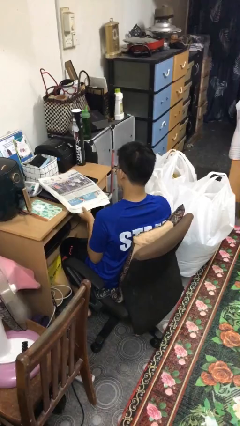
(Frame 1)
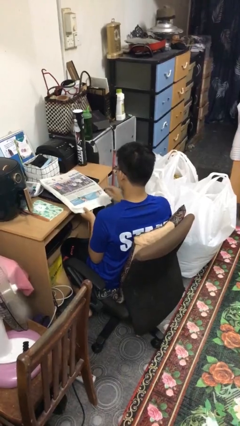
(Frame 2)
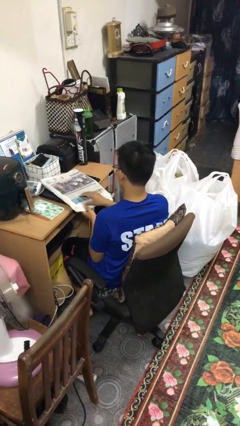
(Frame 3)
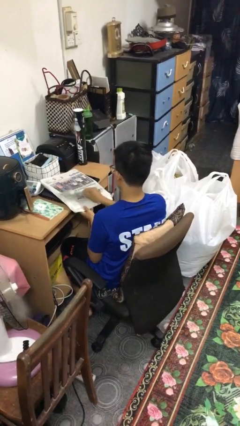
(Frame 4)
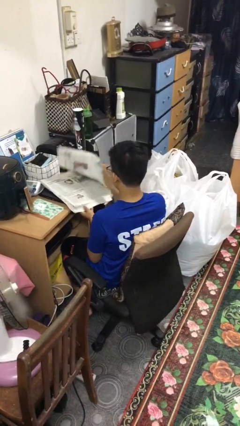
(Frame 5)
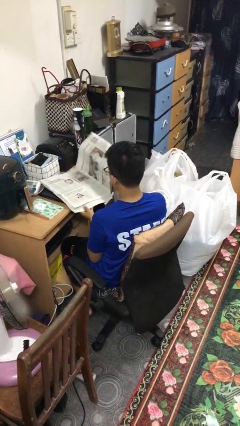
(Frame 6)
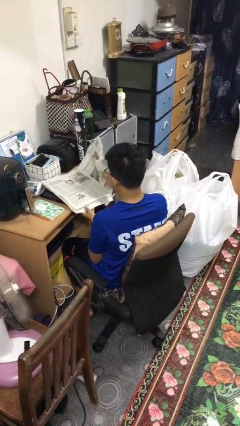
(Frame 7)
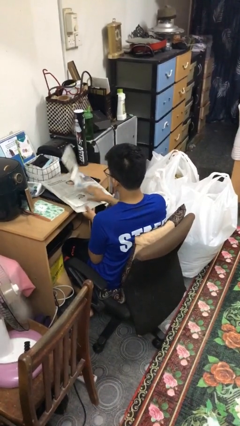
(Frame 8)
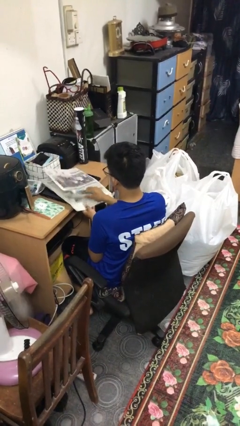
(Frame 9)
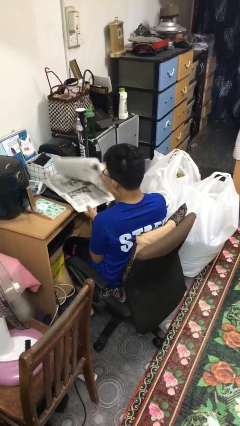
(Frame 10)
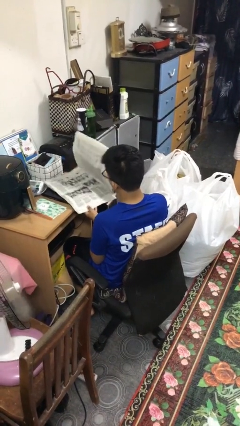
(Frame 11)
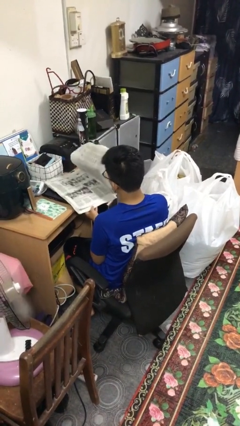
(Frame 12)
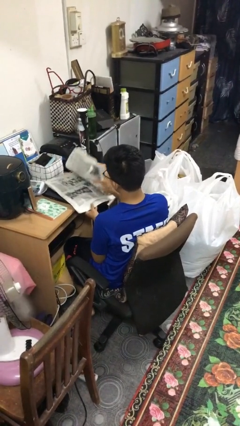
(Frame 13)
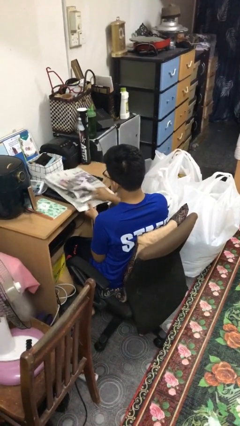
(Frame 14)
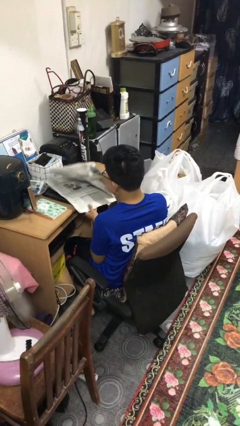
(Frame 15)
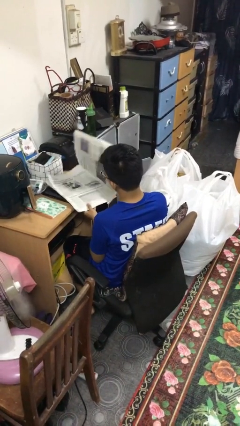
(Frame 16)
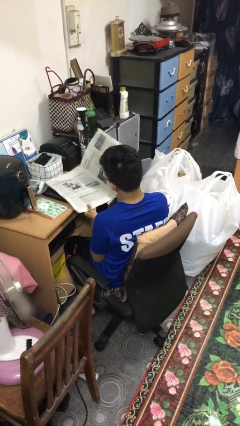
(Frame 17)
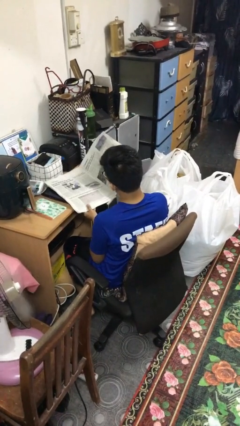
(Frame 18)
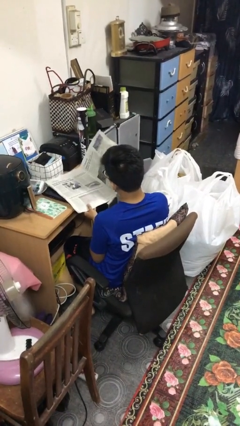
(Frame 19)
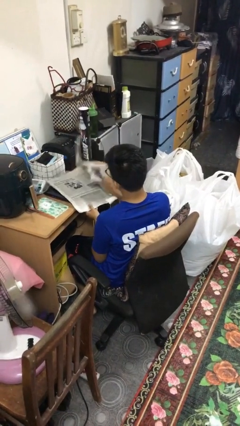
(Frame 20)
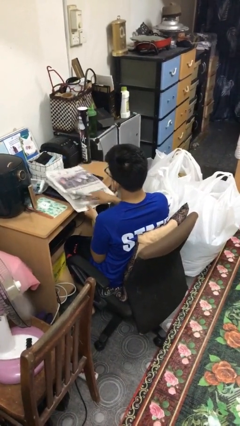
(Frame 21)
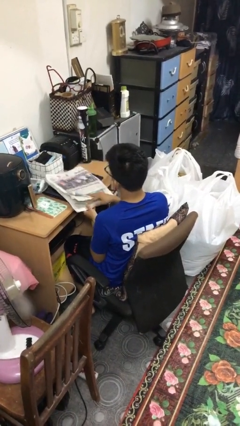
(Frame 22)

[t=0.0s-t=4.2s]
person reads newspaper

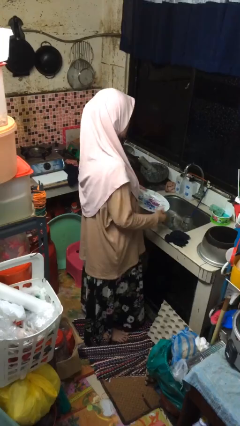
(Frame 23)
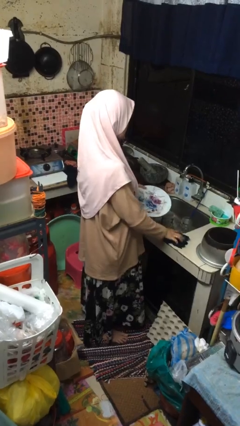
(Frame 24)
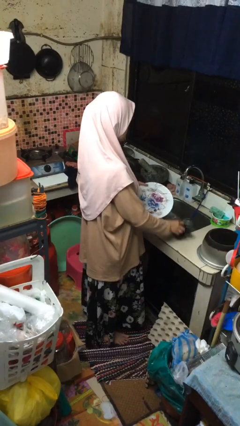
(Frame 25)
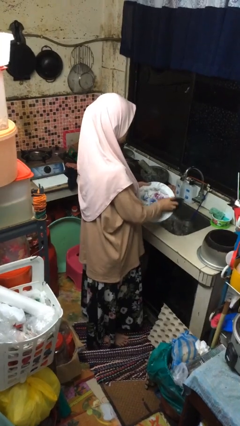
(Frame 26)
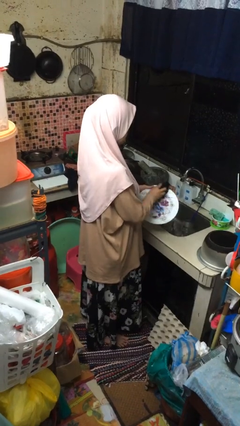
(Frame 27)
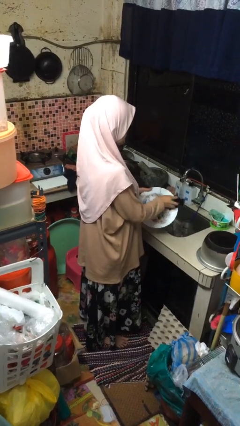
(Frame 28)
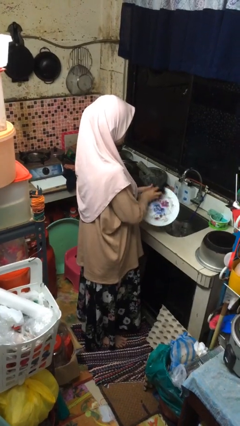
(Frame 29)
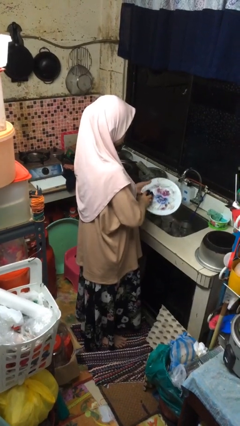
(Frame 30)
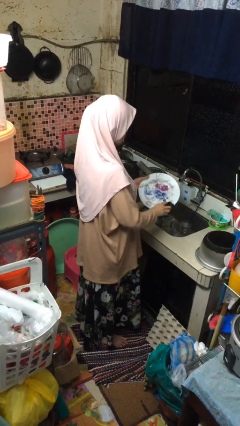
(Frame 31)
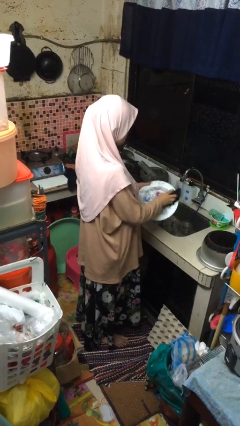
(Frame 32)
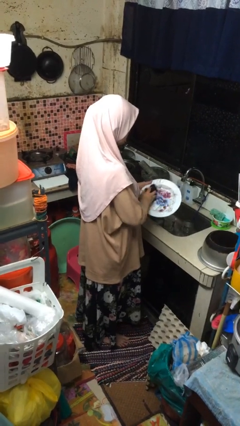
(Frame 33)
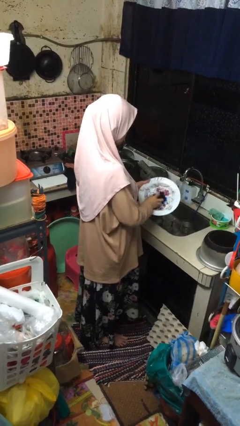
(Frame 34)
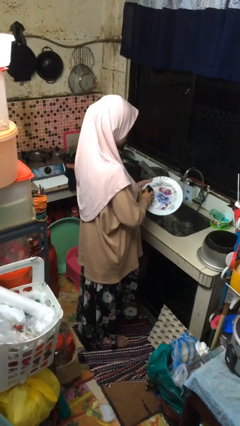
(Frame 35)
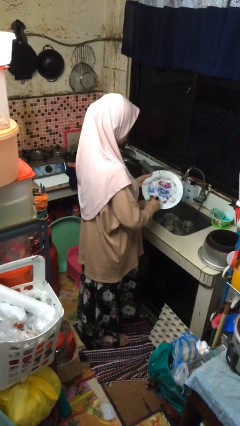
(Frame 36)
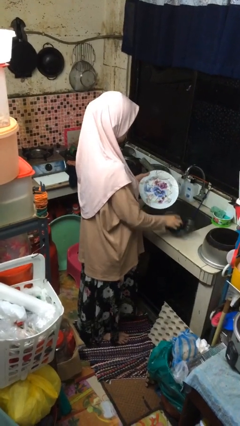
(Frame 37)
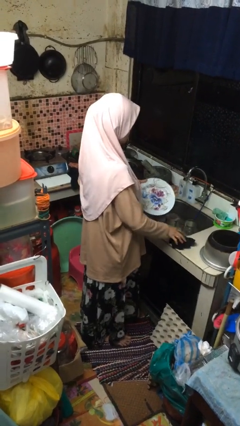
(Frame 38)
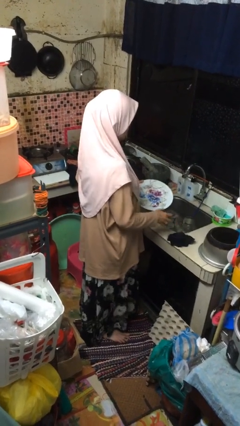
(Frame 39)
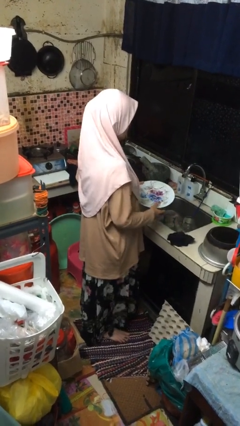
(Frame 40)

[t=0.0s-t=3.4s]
person dries dish

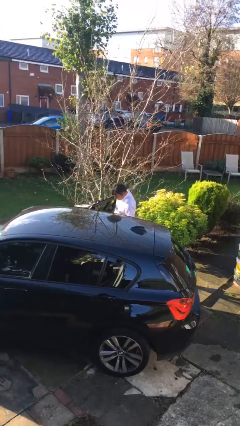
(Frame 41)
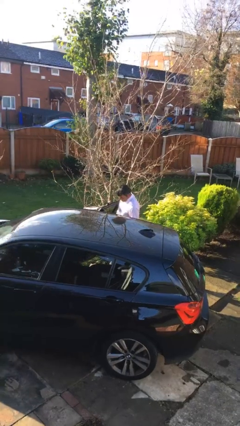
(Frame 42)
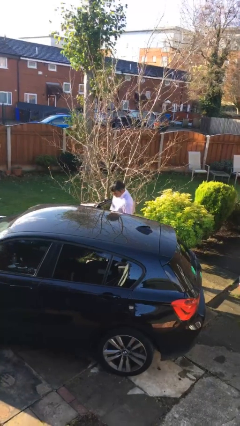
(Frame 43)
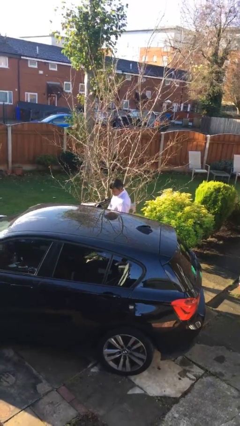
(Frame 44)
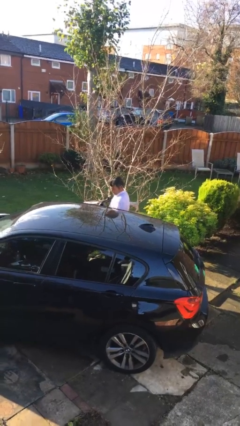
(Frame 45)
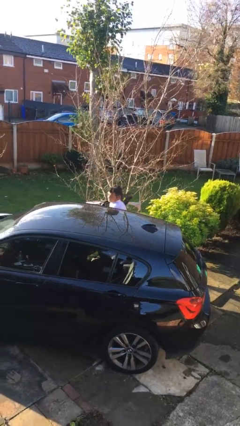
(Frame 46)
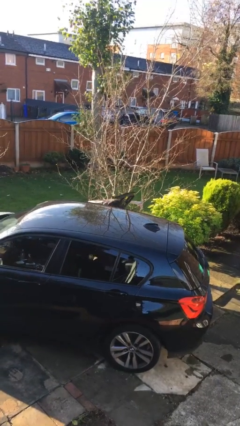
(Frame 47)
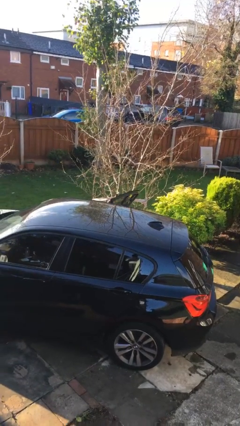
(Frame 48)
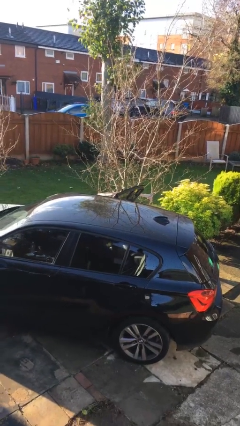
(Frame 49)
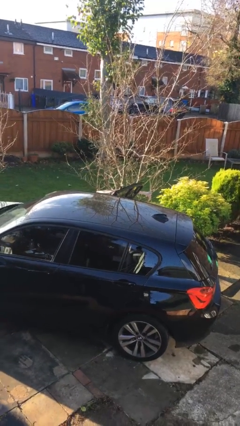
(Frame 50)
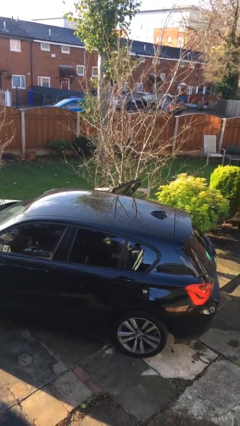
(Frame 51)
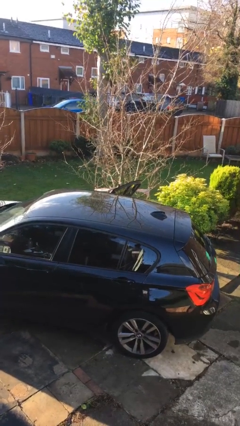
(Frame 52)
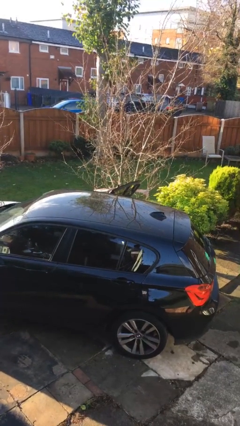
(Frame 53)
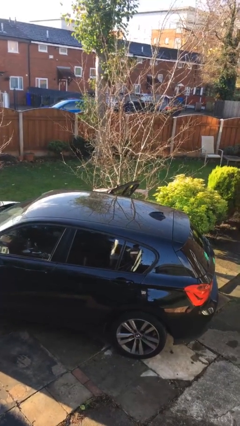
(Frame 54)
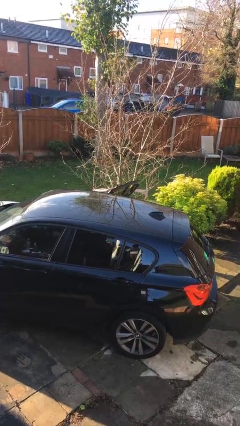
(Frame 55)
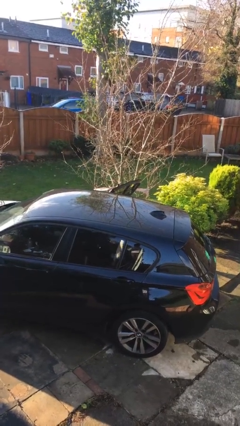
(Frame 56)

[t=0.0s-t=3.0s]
person enters car

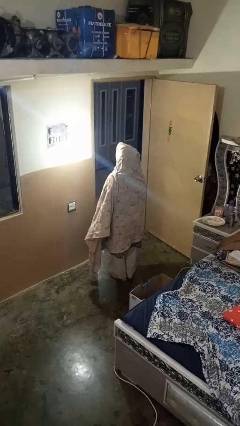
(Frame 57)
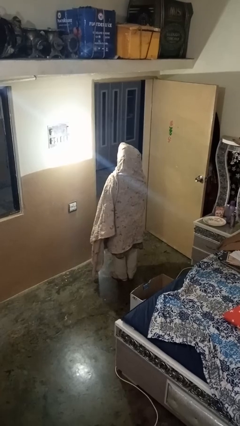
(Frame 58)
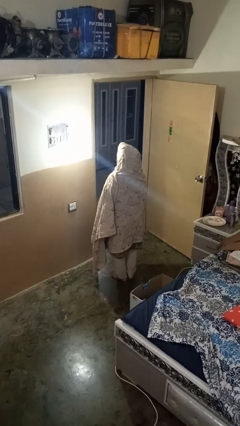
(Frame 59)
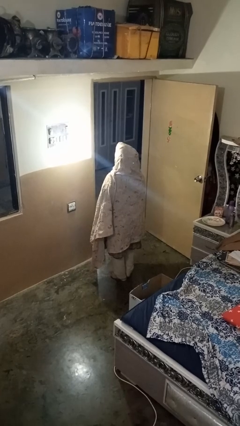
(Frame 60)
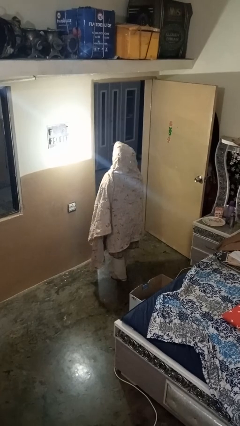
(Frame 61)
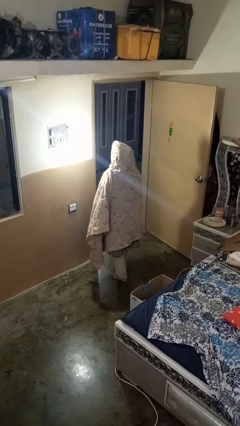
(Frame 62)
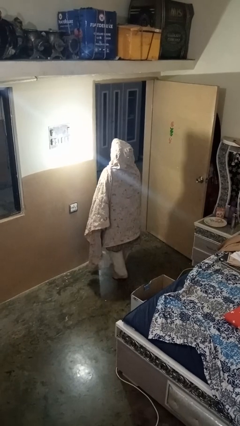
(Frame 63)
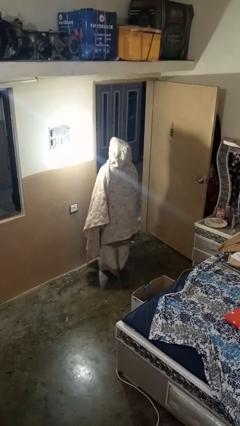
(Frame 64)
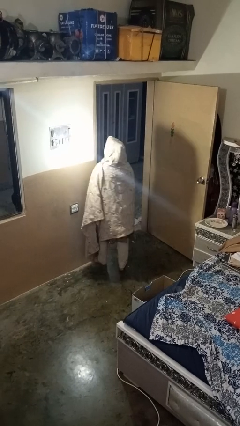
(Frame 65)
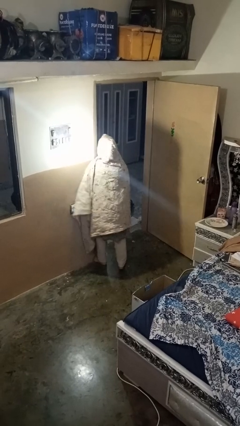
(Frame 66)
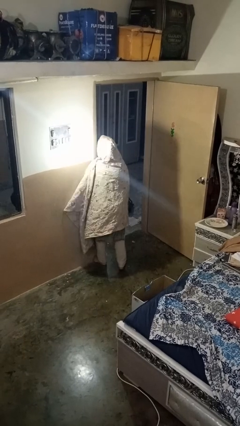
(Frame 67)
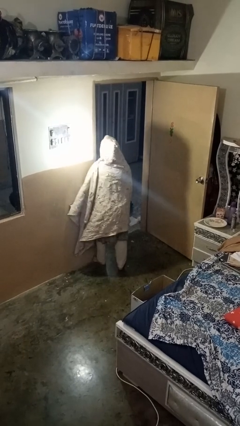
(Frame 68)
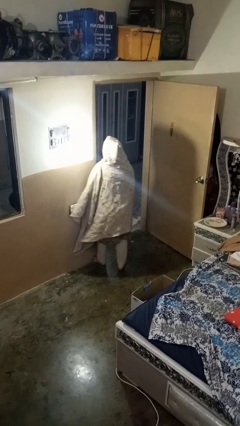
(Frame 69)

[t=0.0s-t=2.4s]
person bumps into wall

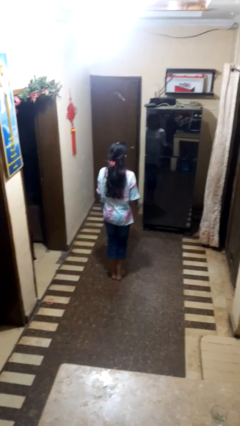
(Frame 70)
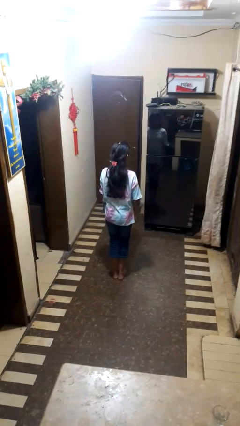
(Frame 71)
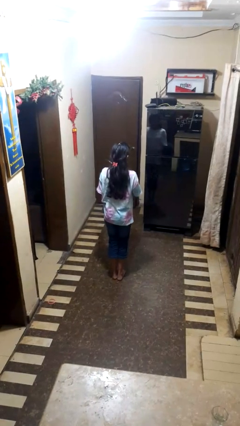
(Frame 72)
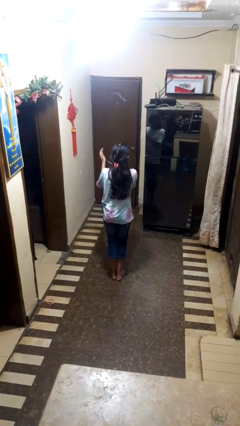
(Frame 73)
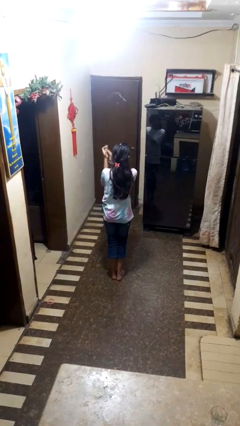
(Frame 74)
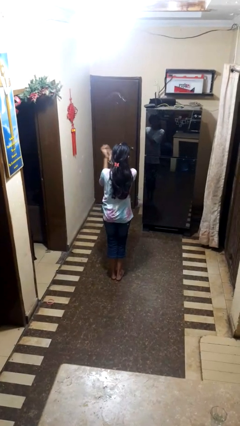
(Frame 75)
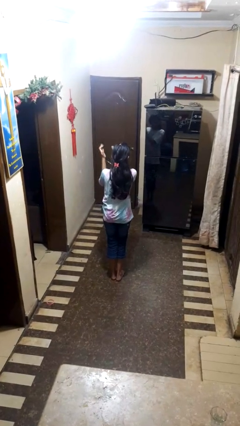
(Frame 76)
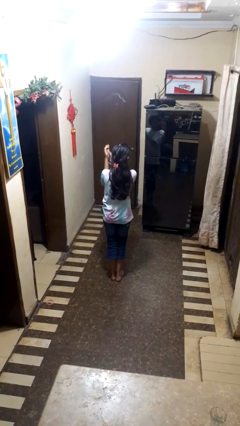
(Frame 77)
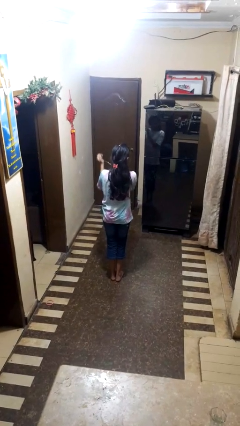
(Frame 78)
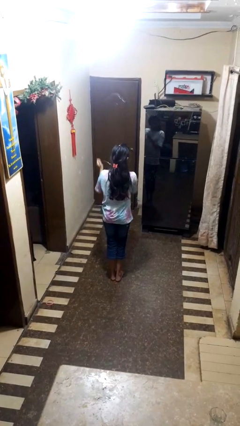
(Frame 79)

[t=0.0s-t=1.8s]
person claps hands

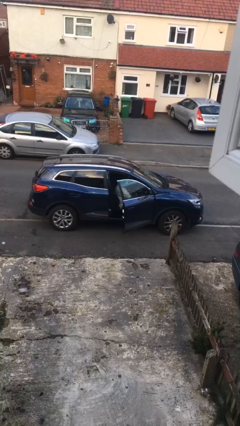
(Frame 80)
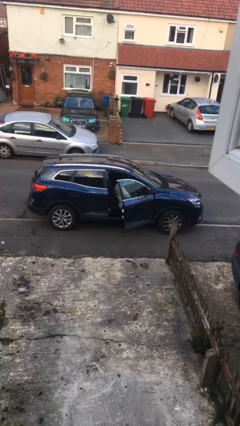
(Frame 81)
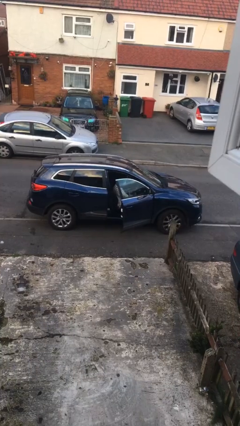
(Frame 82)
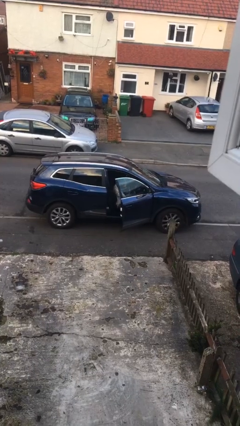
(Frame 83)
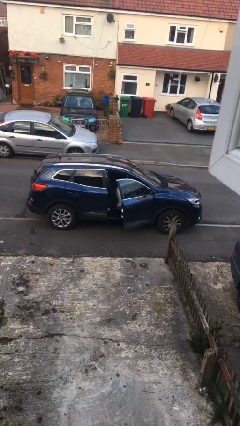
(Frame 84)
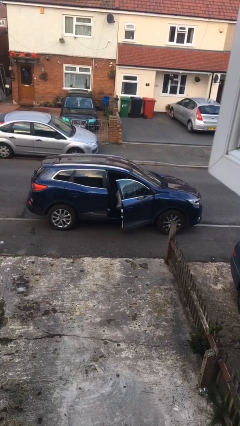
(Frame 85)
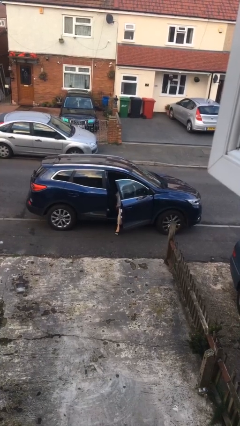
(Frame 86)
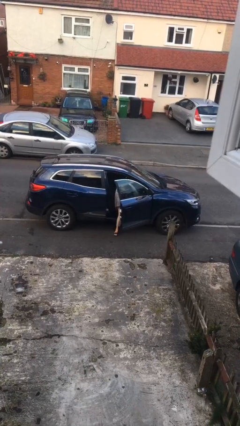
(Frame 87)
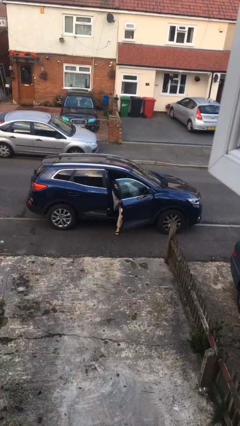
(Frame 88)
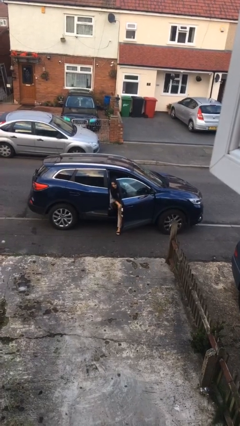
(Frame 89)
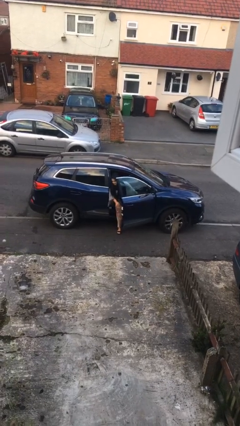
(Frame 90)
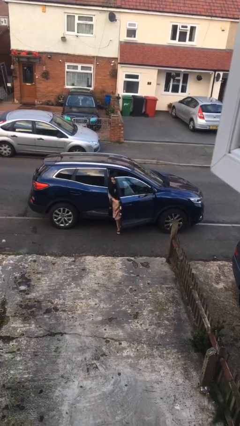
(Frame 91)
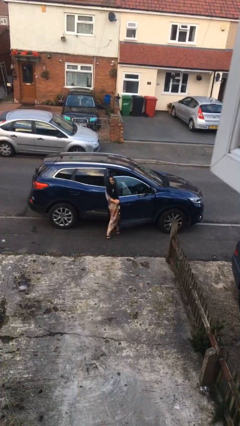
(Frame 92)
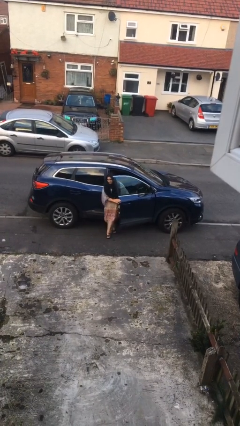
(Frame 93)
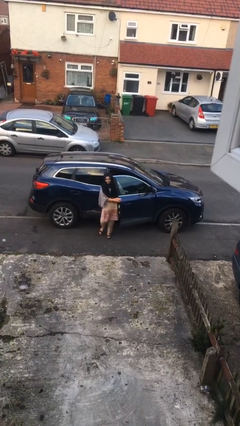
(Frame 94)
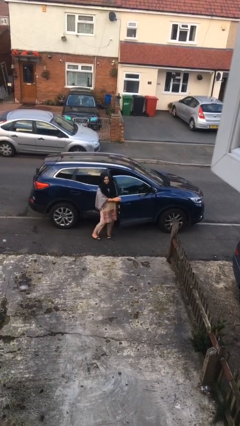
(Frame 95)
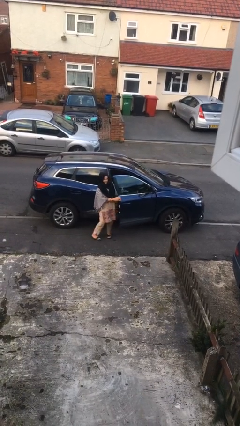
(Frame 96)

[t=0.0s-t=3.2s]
person exits car
